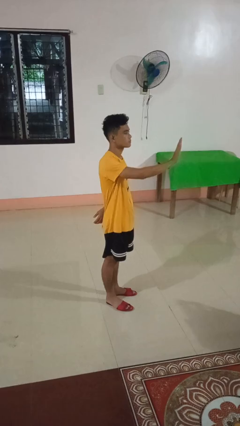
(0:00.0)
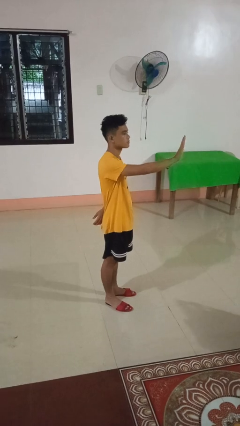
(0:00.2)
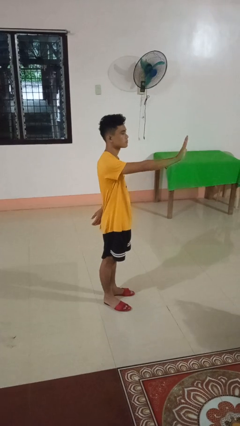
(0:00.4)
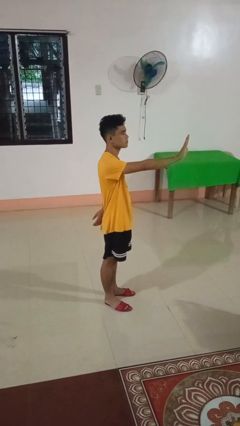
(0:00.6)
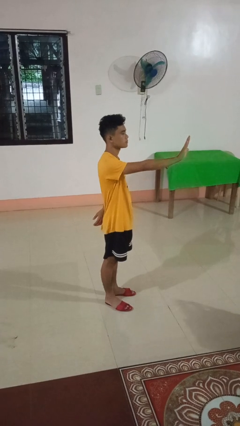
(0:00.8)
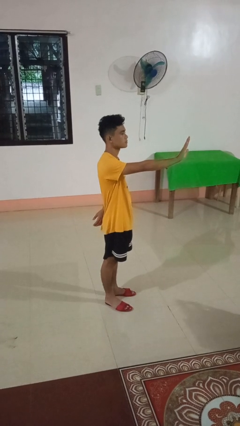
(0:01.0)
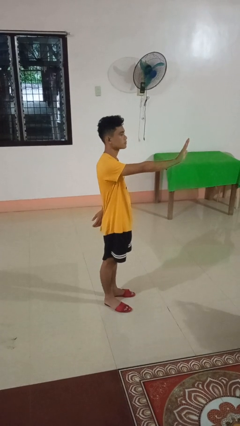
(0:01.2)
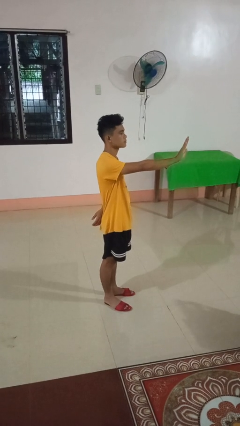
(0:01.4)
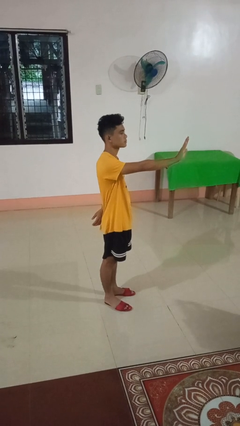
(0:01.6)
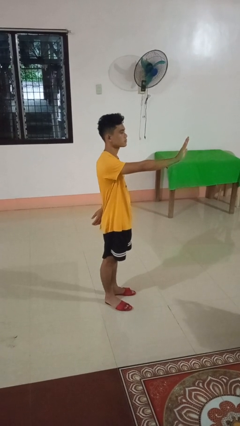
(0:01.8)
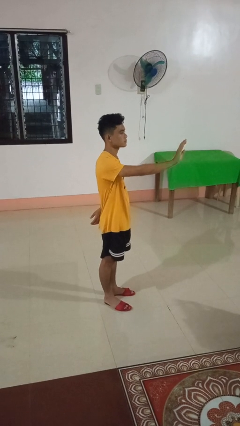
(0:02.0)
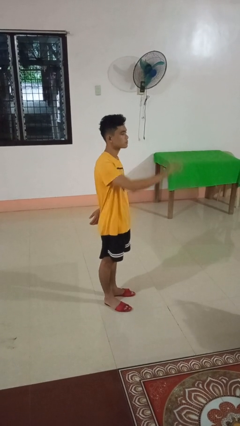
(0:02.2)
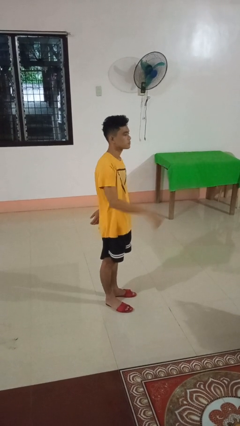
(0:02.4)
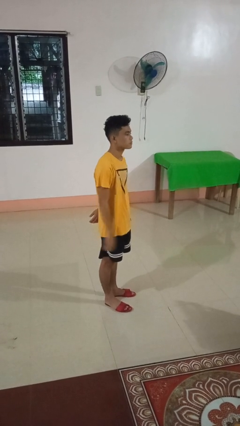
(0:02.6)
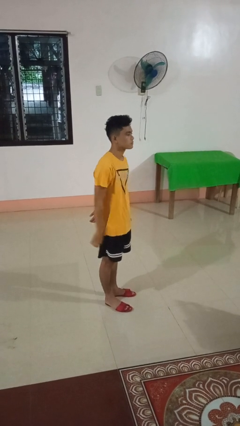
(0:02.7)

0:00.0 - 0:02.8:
person gestures stop

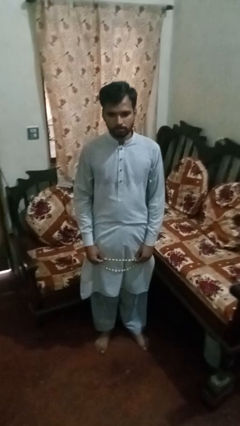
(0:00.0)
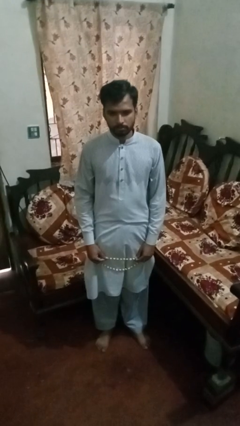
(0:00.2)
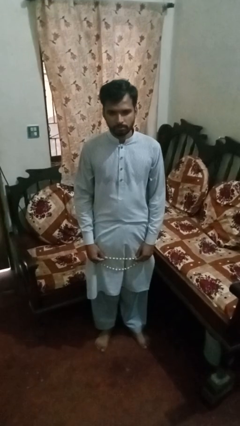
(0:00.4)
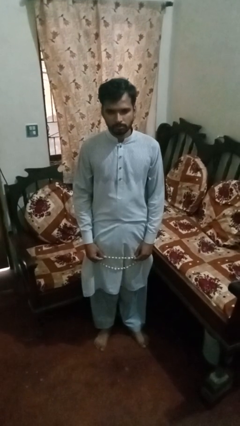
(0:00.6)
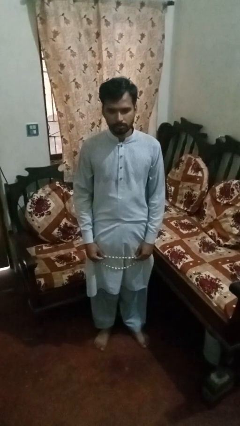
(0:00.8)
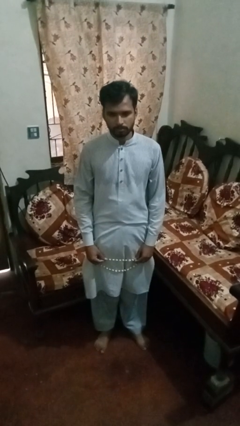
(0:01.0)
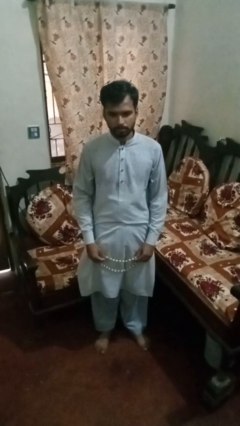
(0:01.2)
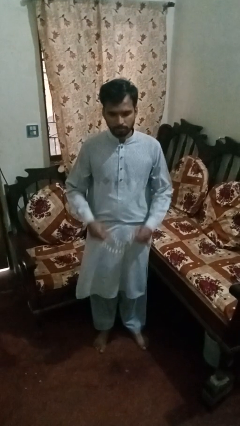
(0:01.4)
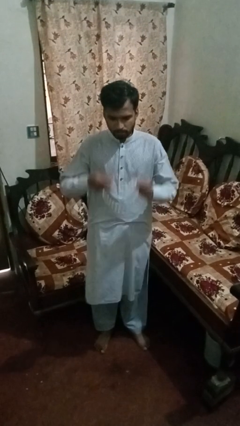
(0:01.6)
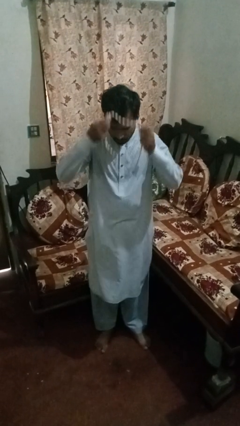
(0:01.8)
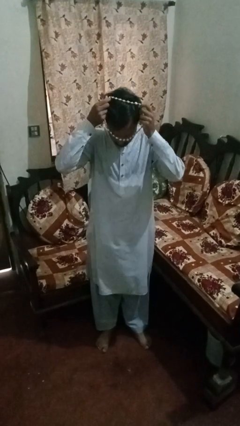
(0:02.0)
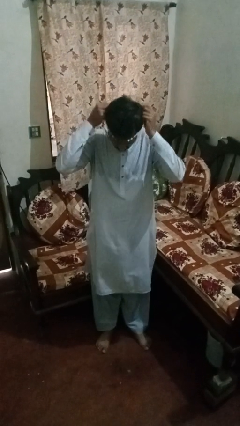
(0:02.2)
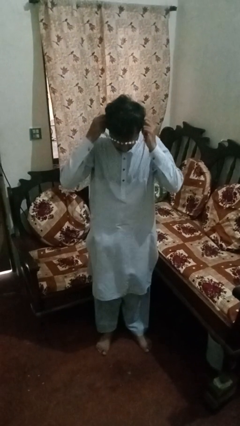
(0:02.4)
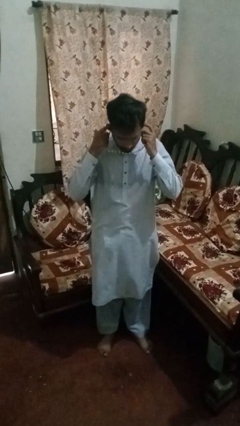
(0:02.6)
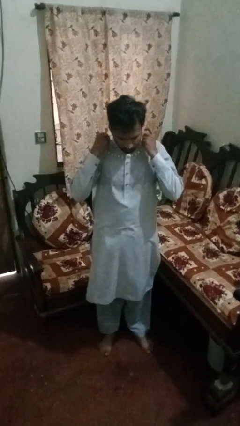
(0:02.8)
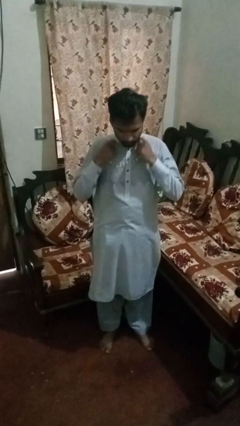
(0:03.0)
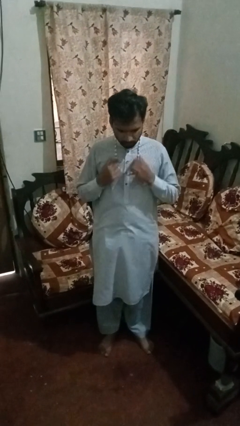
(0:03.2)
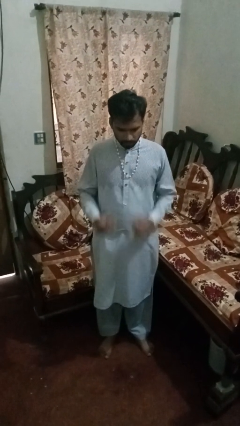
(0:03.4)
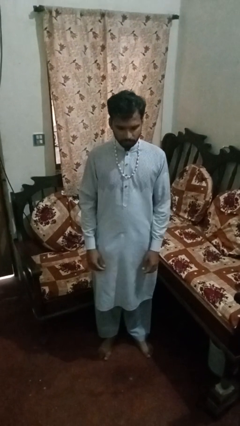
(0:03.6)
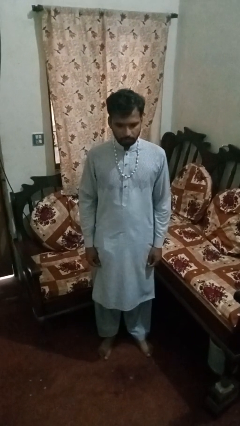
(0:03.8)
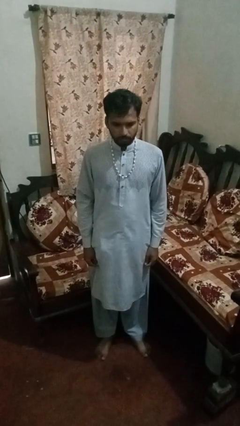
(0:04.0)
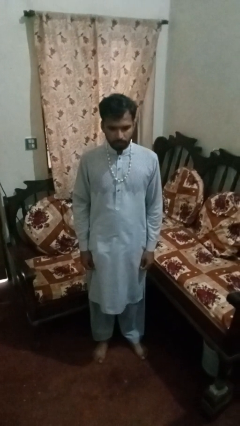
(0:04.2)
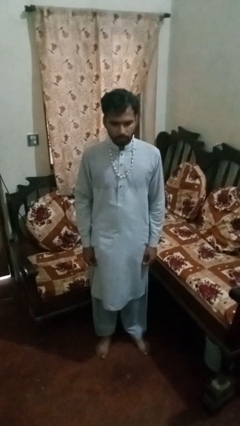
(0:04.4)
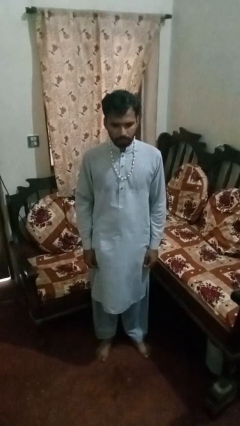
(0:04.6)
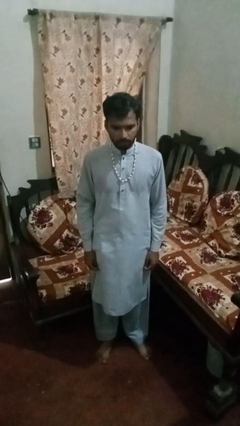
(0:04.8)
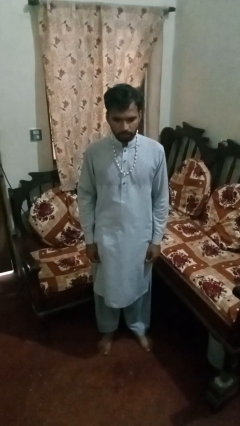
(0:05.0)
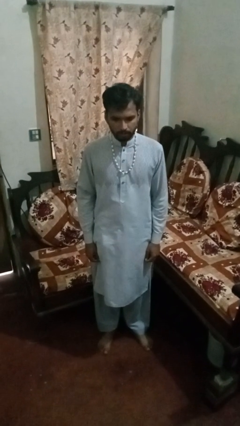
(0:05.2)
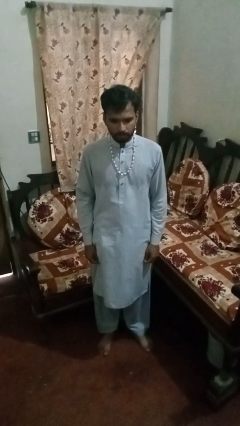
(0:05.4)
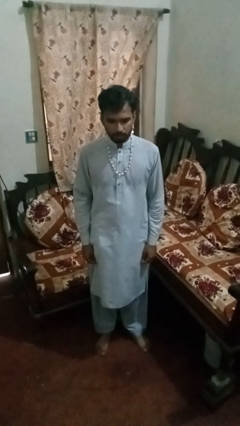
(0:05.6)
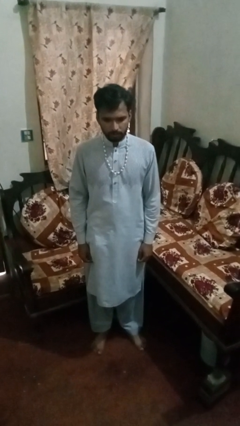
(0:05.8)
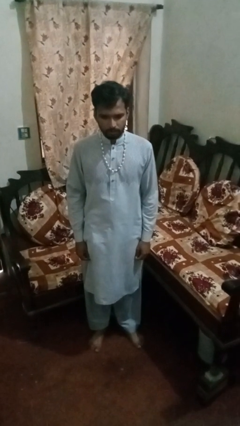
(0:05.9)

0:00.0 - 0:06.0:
person puts on necklace

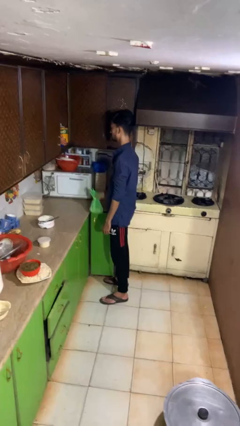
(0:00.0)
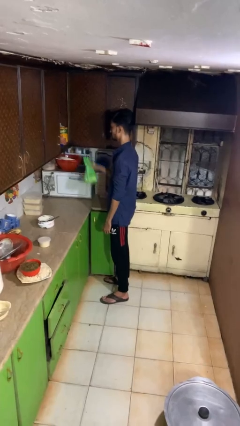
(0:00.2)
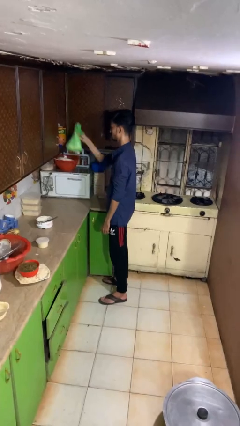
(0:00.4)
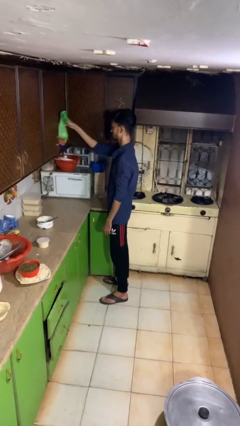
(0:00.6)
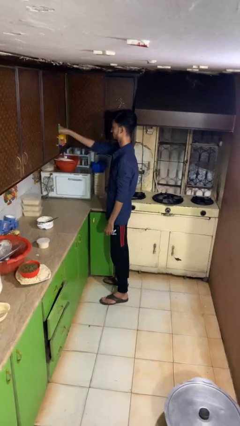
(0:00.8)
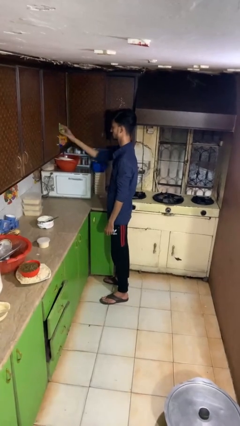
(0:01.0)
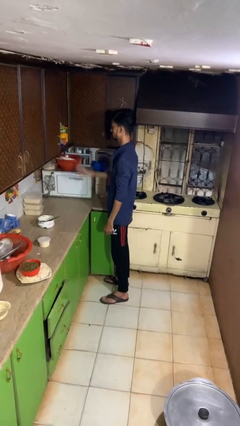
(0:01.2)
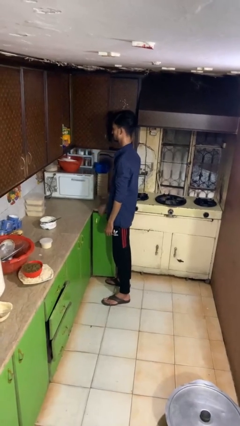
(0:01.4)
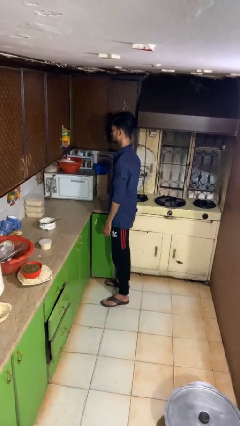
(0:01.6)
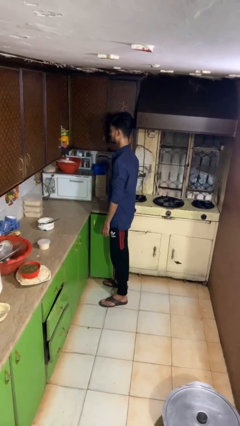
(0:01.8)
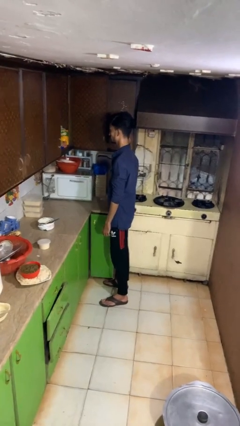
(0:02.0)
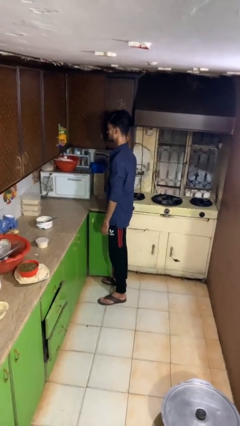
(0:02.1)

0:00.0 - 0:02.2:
person loads groceries into cabinet

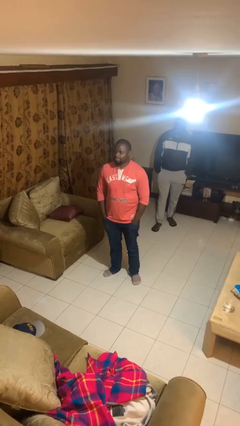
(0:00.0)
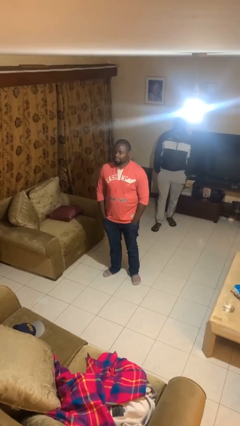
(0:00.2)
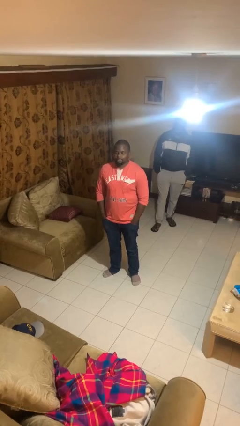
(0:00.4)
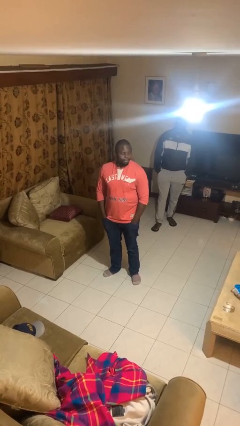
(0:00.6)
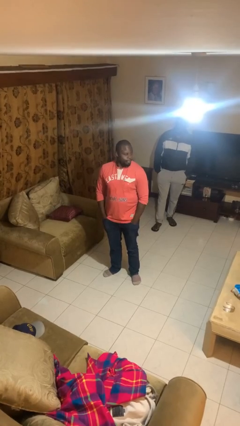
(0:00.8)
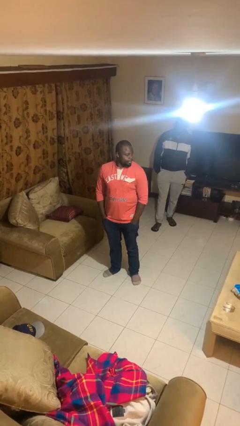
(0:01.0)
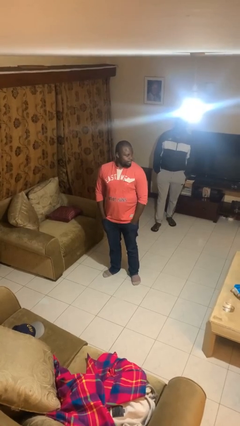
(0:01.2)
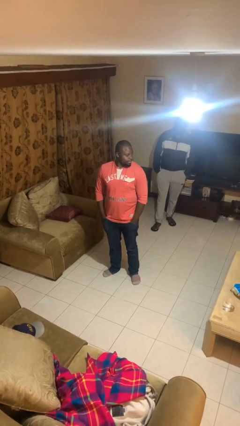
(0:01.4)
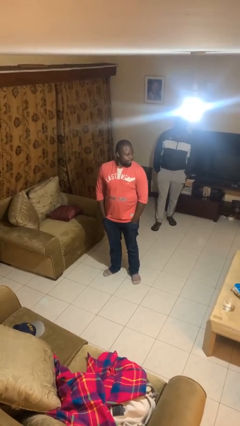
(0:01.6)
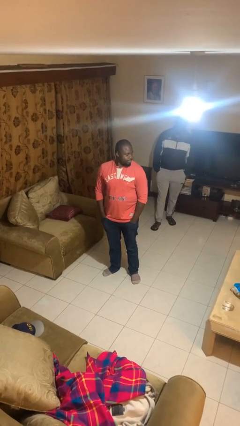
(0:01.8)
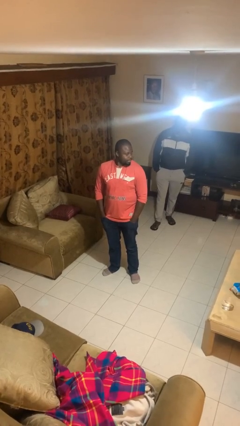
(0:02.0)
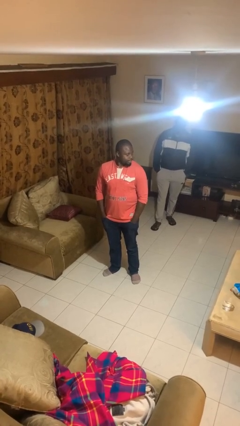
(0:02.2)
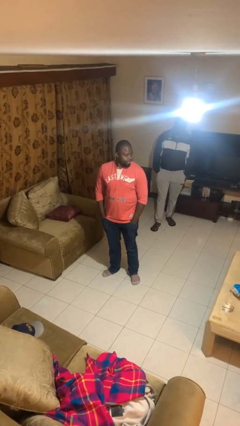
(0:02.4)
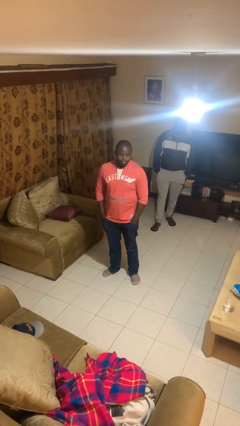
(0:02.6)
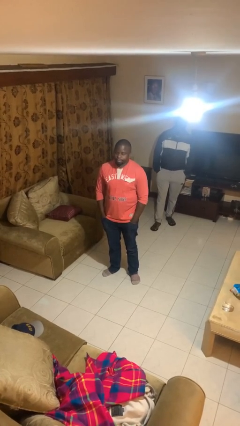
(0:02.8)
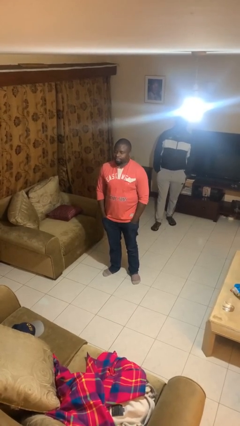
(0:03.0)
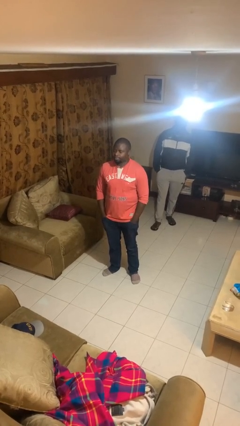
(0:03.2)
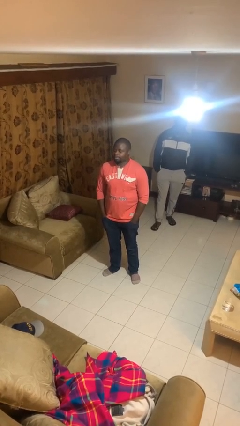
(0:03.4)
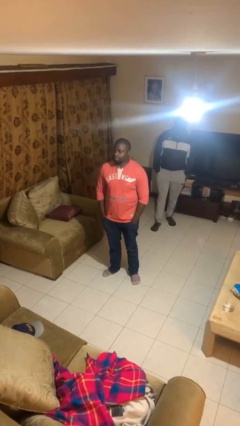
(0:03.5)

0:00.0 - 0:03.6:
person looks over shoulder

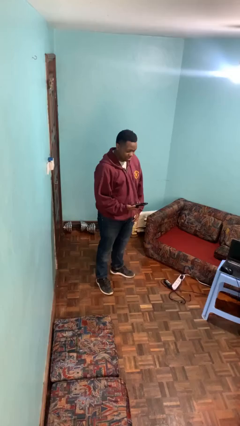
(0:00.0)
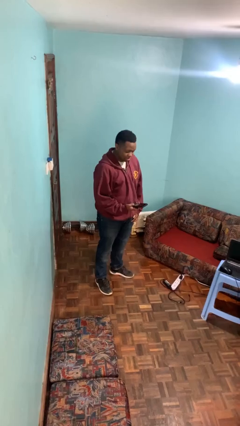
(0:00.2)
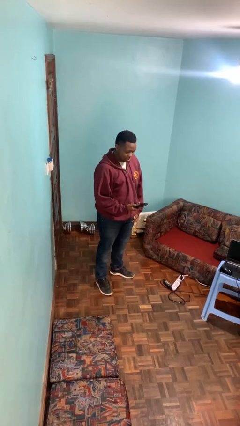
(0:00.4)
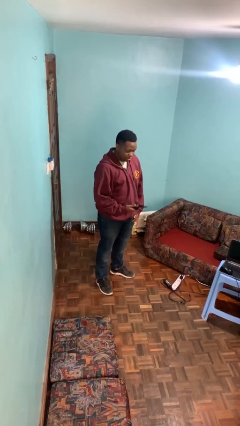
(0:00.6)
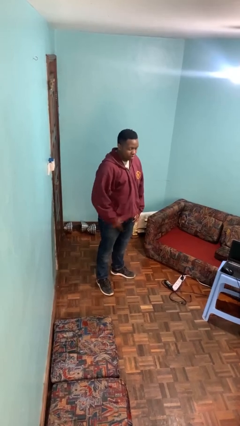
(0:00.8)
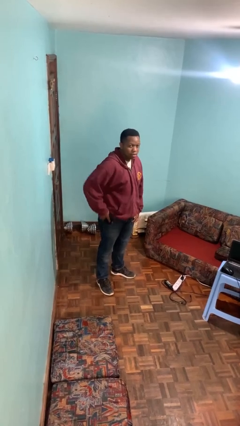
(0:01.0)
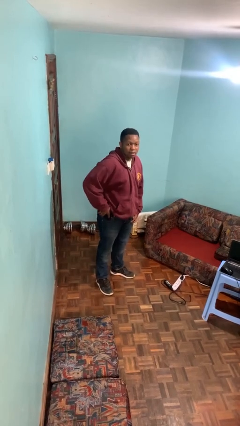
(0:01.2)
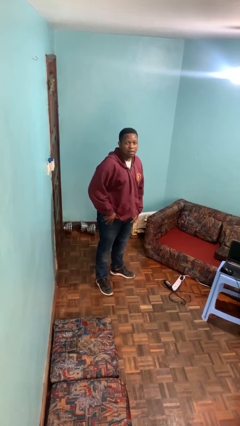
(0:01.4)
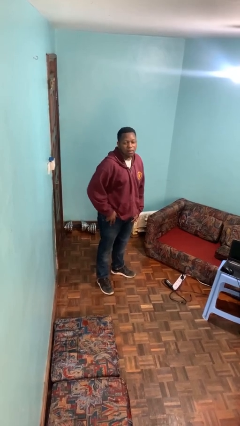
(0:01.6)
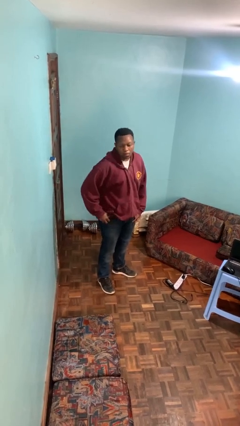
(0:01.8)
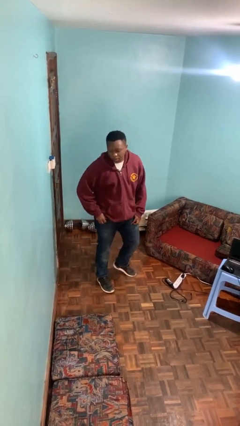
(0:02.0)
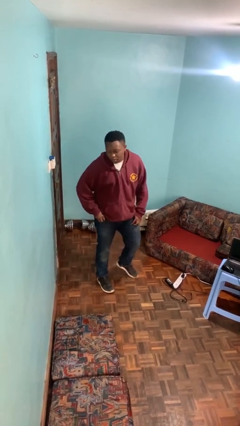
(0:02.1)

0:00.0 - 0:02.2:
person puts phone into pocket

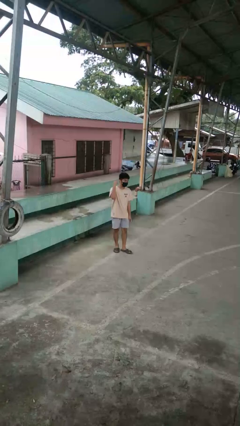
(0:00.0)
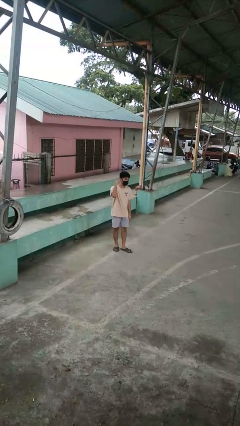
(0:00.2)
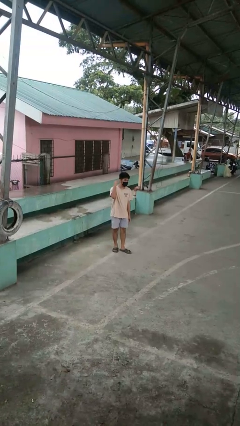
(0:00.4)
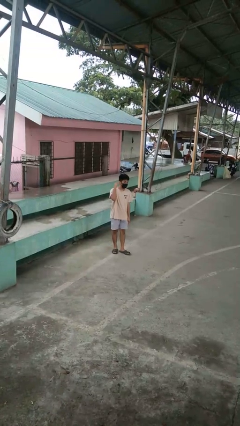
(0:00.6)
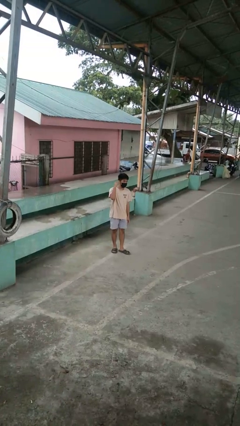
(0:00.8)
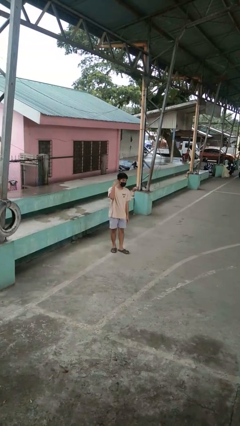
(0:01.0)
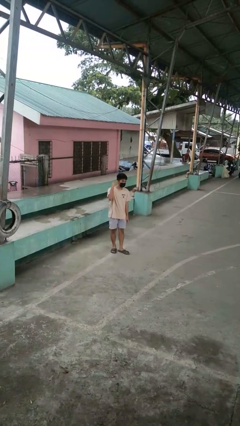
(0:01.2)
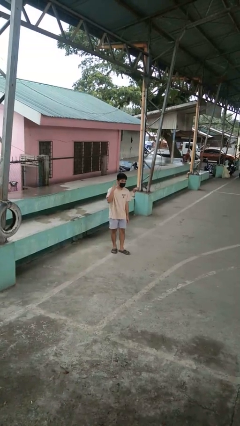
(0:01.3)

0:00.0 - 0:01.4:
person gestures listen closely
